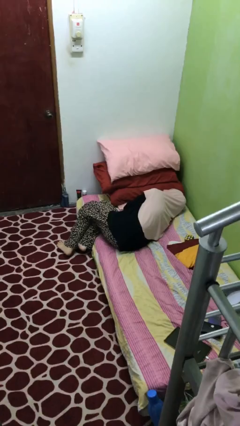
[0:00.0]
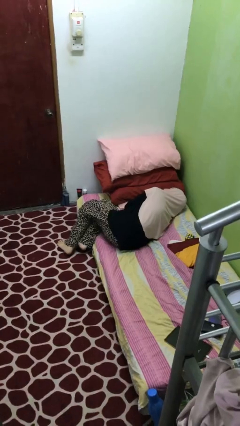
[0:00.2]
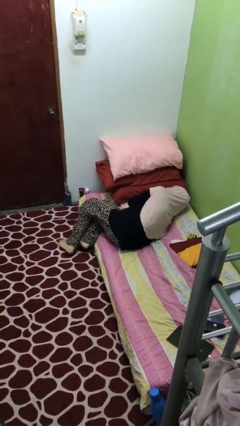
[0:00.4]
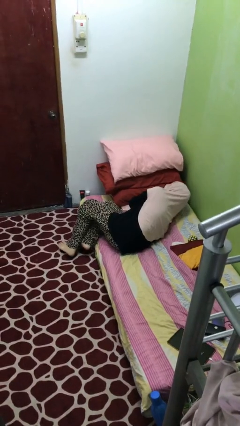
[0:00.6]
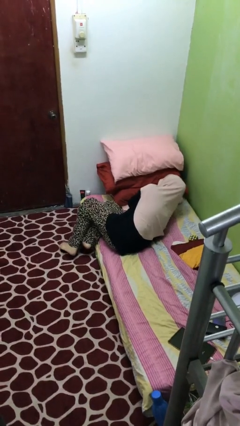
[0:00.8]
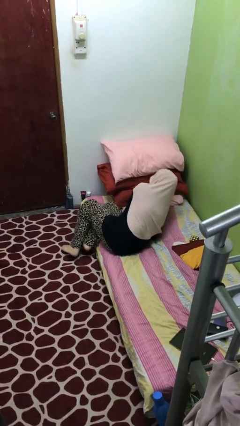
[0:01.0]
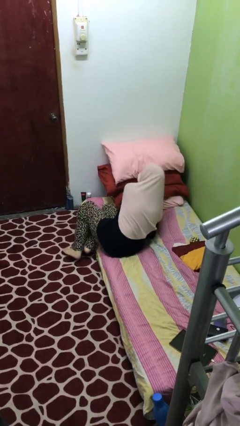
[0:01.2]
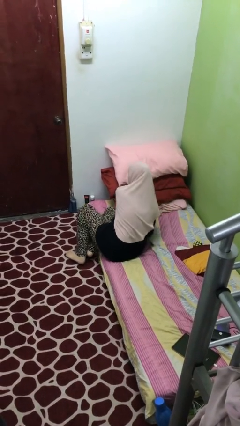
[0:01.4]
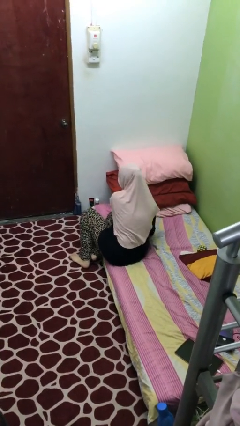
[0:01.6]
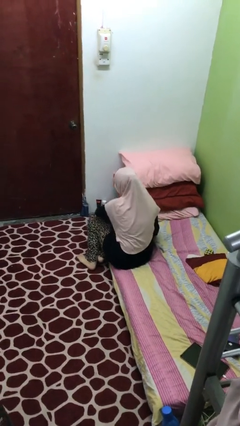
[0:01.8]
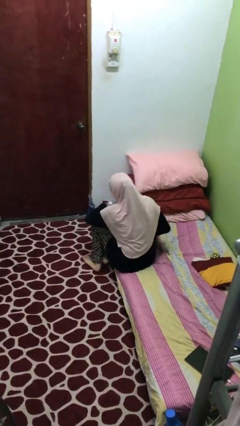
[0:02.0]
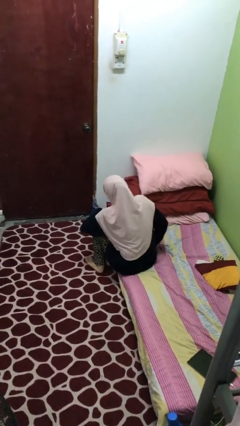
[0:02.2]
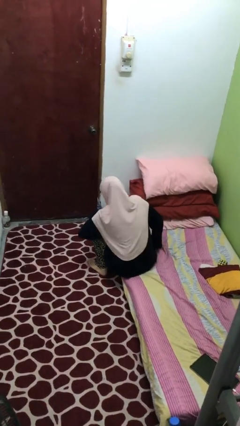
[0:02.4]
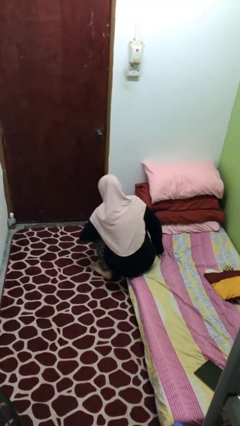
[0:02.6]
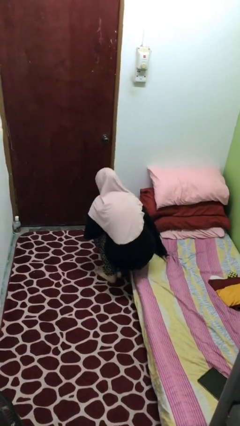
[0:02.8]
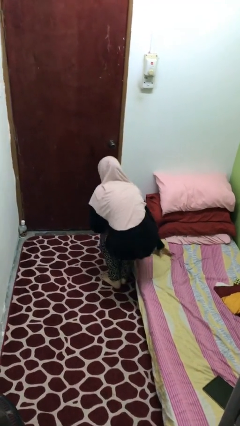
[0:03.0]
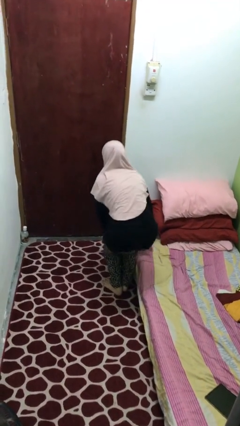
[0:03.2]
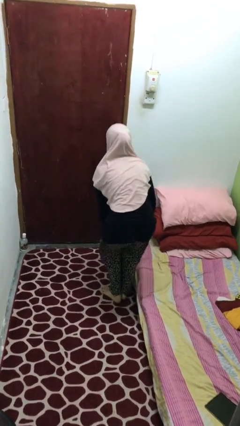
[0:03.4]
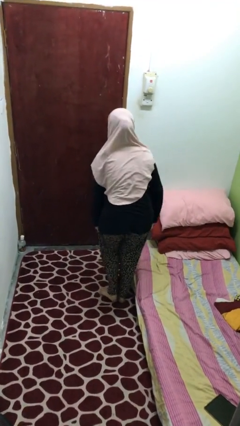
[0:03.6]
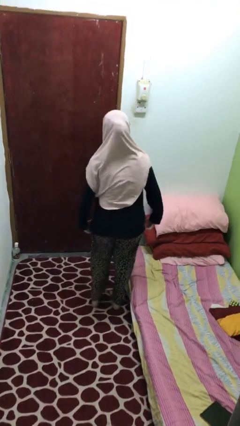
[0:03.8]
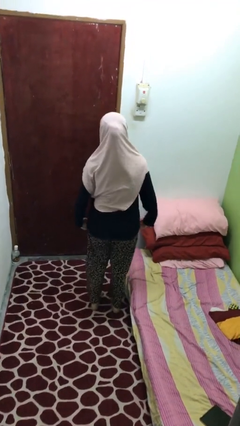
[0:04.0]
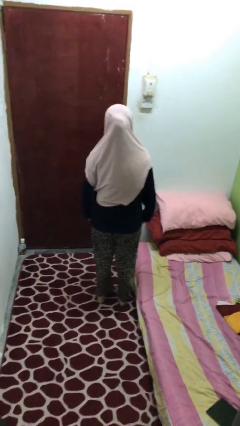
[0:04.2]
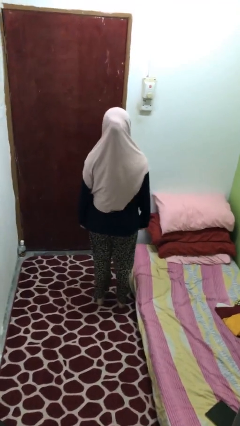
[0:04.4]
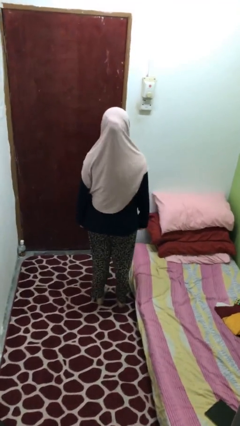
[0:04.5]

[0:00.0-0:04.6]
person stands up

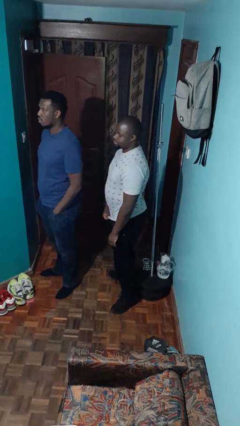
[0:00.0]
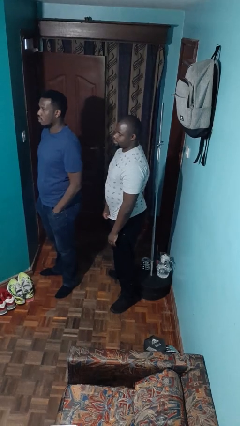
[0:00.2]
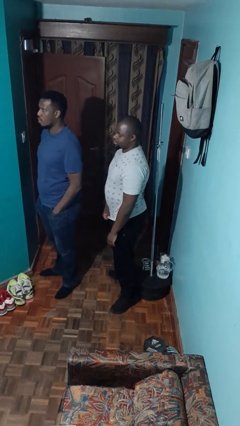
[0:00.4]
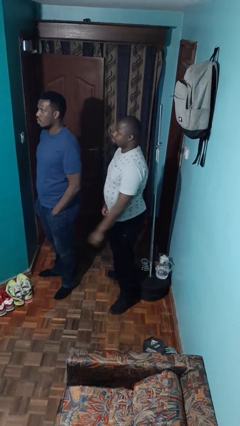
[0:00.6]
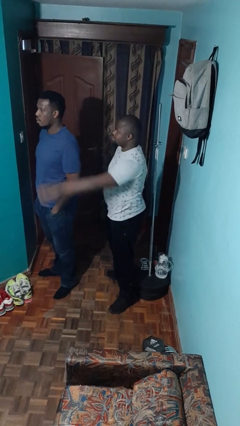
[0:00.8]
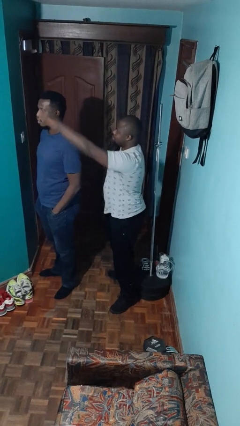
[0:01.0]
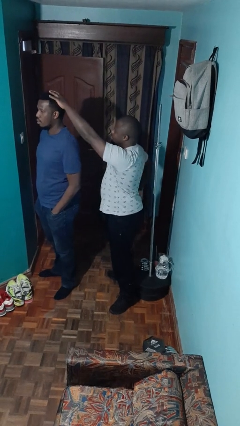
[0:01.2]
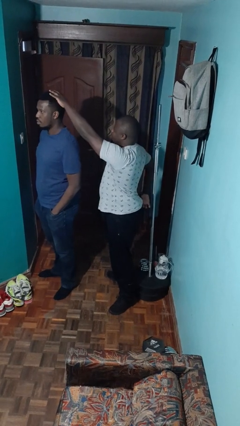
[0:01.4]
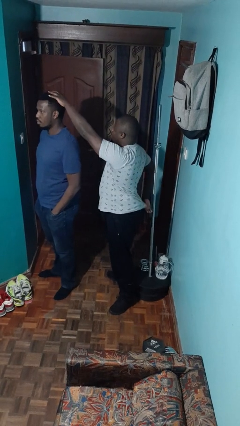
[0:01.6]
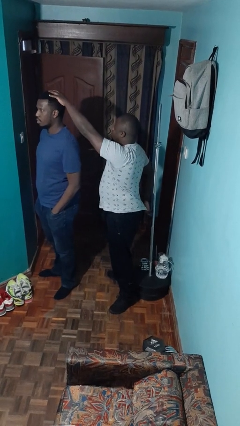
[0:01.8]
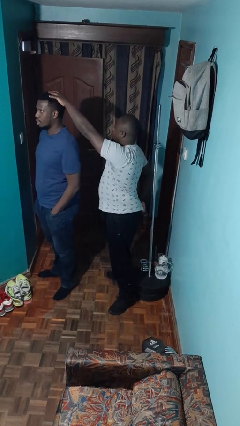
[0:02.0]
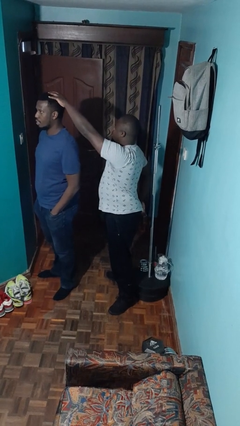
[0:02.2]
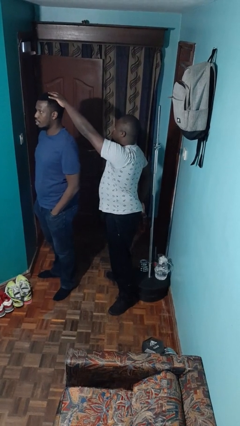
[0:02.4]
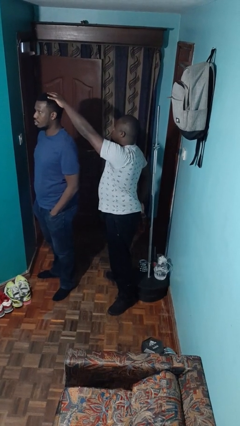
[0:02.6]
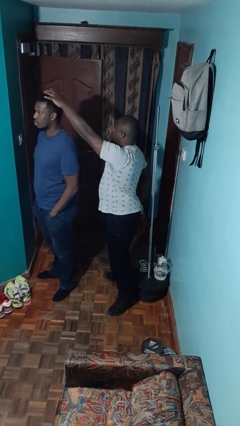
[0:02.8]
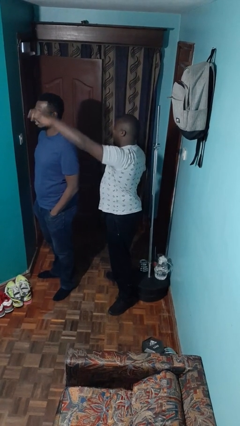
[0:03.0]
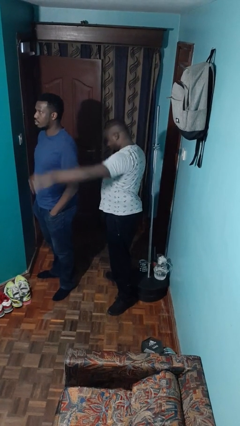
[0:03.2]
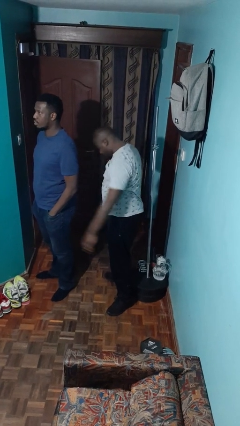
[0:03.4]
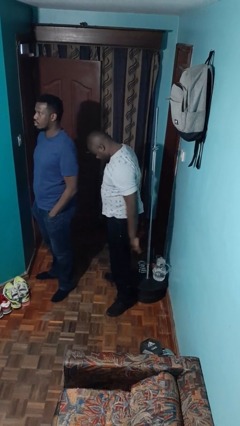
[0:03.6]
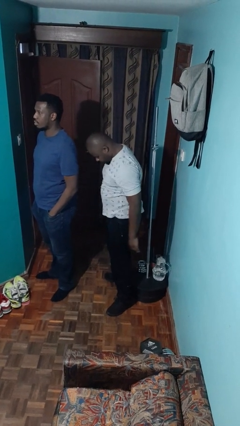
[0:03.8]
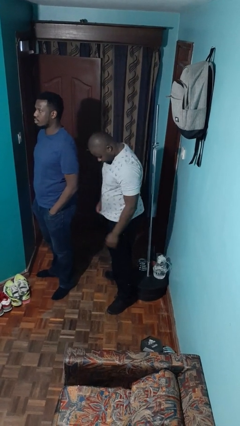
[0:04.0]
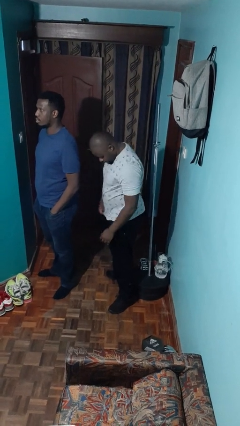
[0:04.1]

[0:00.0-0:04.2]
person grabs person by hair

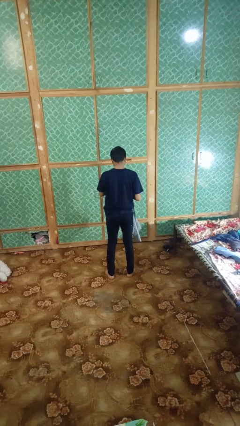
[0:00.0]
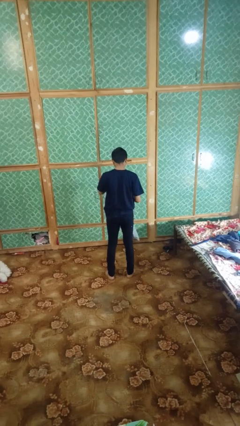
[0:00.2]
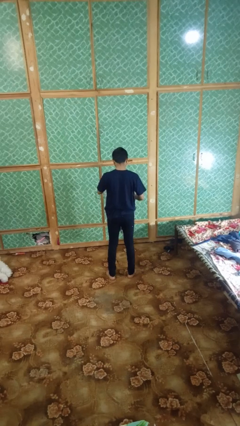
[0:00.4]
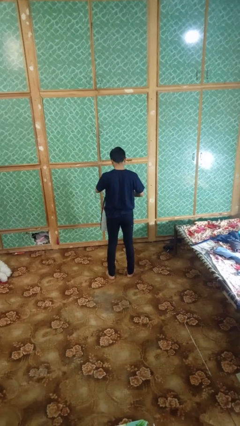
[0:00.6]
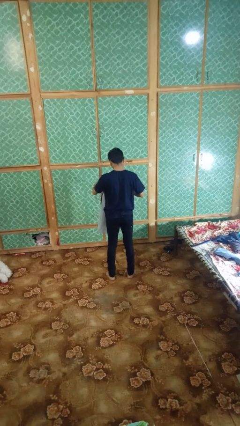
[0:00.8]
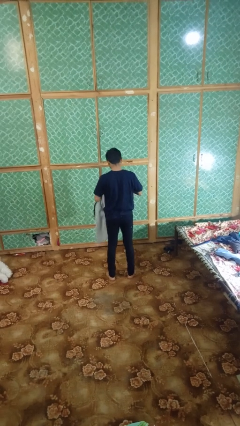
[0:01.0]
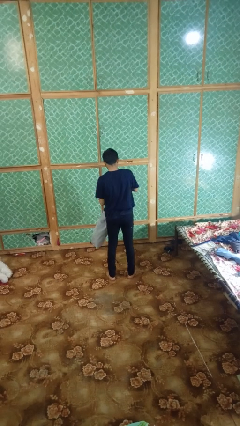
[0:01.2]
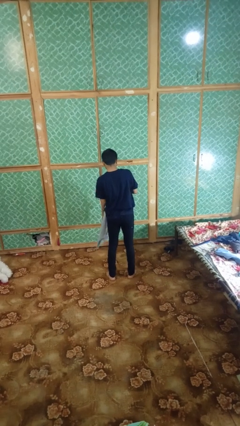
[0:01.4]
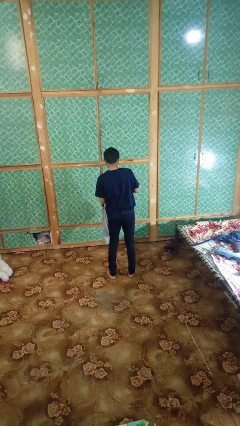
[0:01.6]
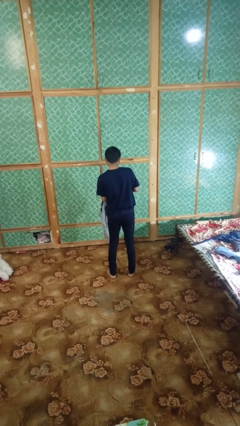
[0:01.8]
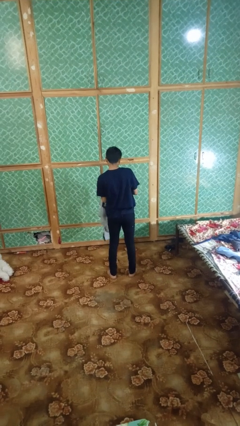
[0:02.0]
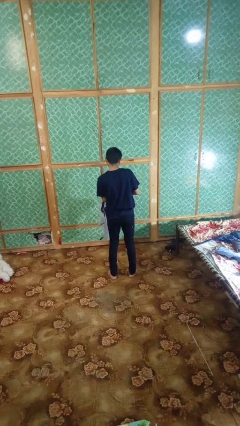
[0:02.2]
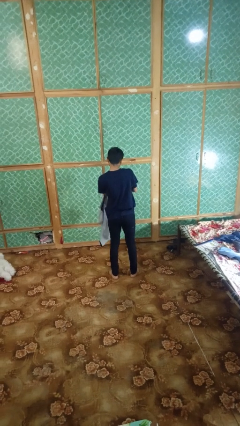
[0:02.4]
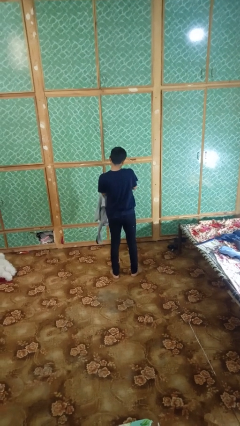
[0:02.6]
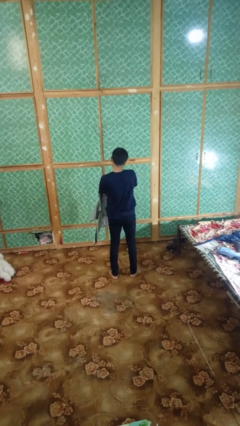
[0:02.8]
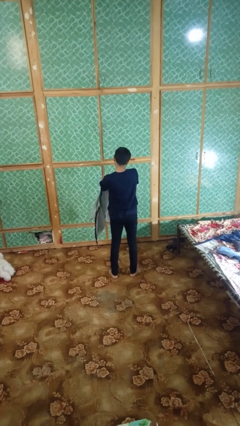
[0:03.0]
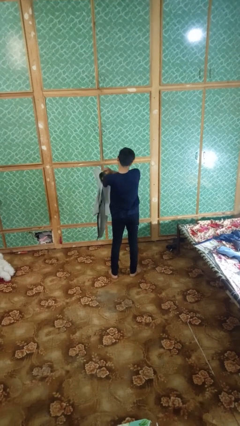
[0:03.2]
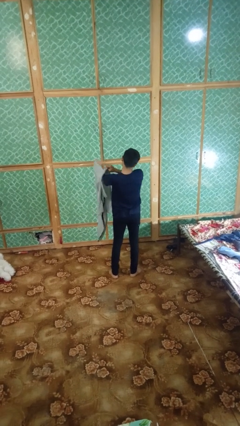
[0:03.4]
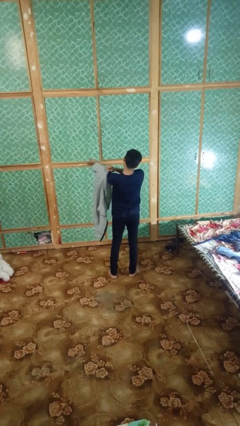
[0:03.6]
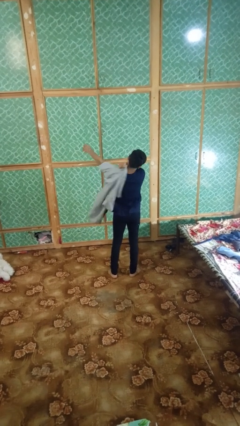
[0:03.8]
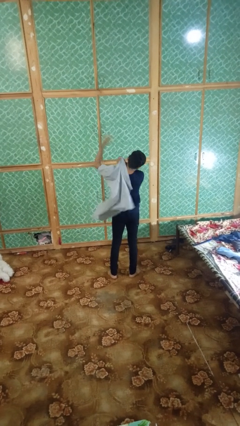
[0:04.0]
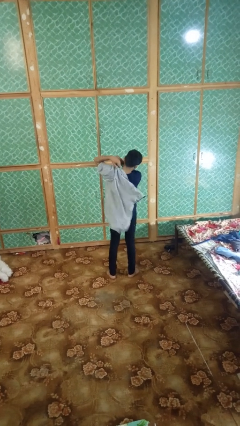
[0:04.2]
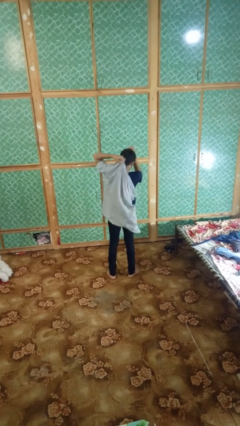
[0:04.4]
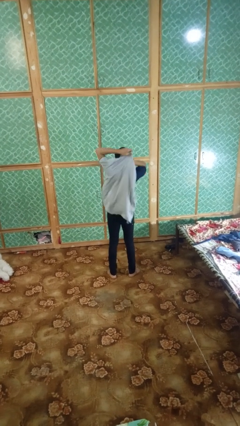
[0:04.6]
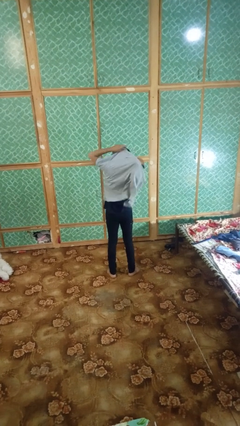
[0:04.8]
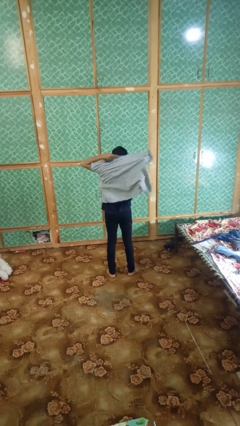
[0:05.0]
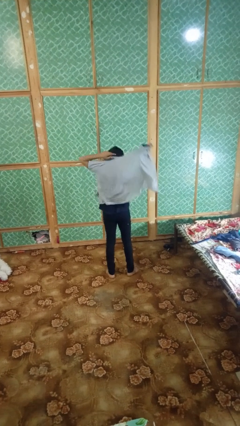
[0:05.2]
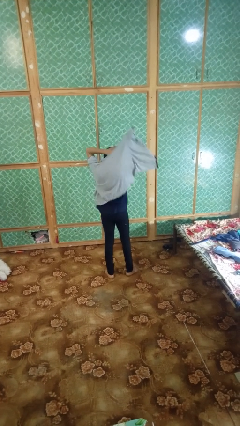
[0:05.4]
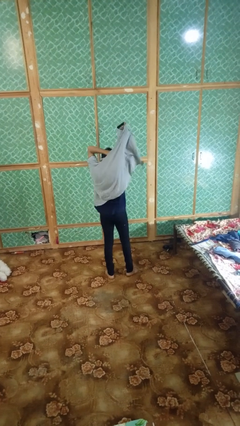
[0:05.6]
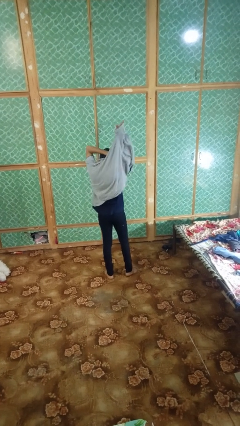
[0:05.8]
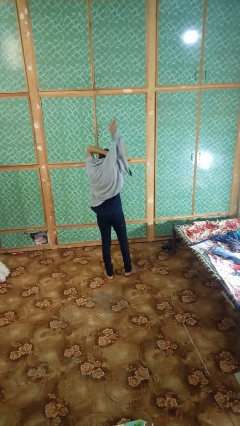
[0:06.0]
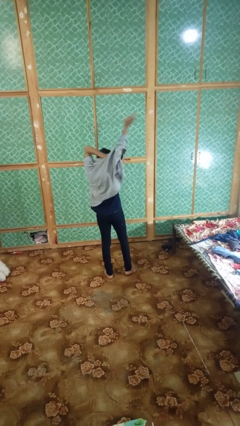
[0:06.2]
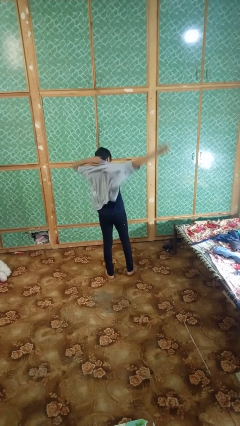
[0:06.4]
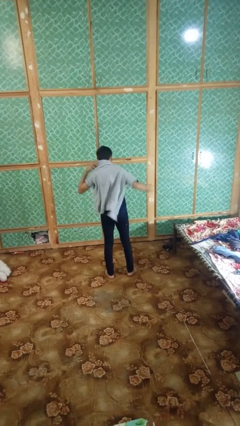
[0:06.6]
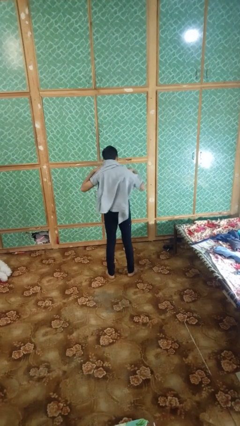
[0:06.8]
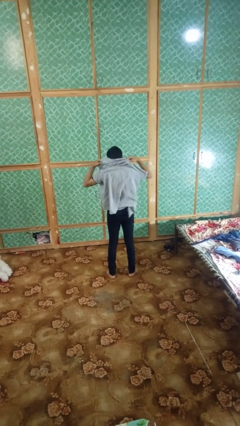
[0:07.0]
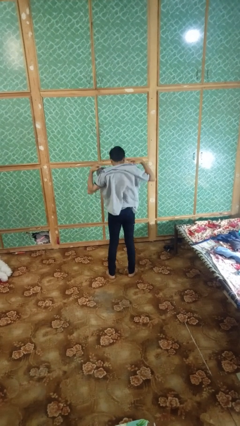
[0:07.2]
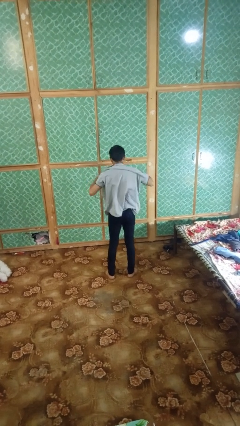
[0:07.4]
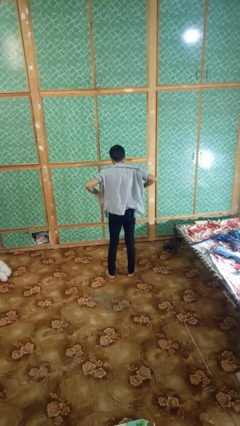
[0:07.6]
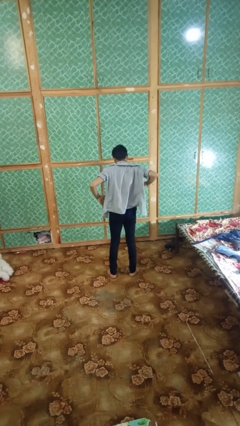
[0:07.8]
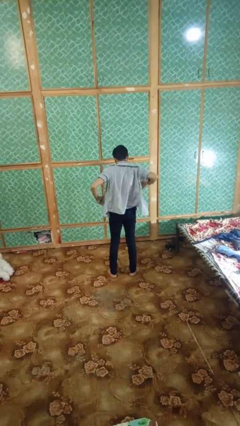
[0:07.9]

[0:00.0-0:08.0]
person puts on shirt

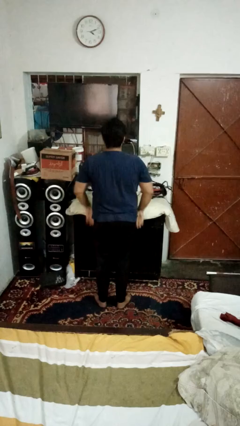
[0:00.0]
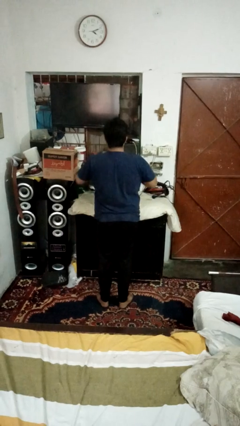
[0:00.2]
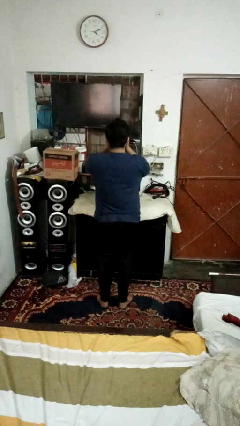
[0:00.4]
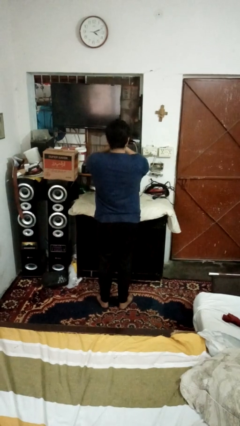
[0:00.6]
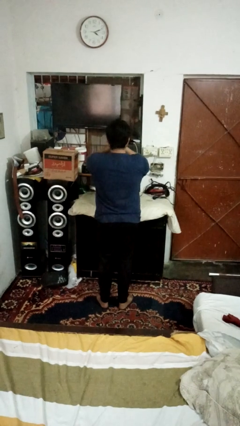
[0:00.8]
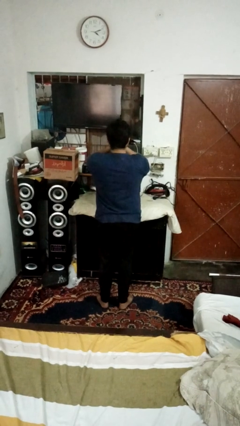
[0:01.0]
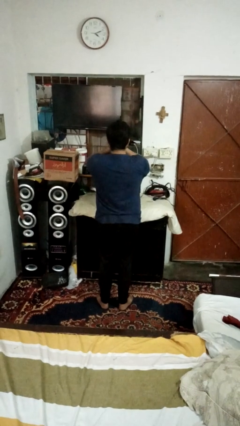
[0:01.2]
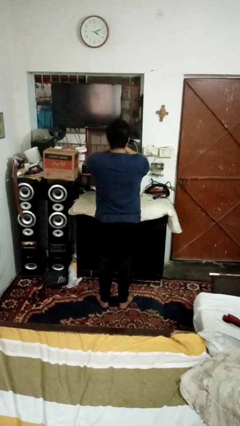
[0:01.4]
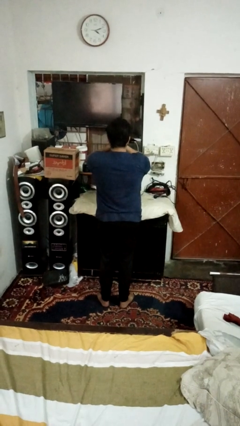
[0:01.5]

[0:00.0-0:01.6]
person covers face with hands
